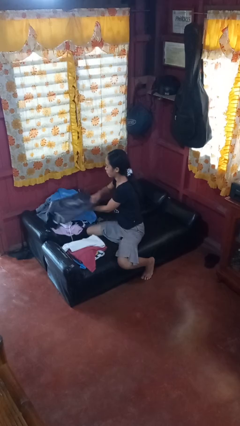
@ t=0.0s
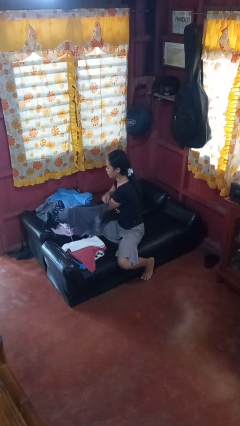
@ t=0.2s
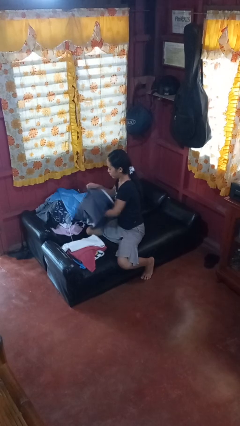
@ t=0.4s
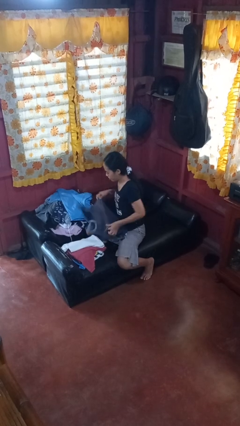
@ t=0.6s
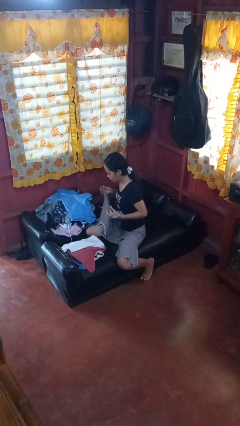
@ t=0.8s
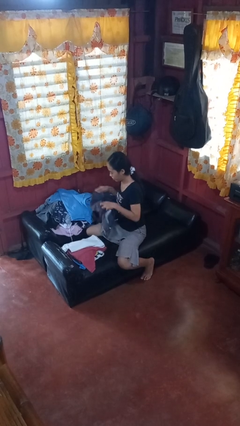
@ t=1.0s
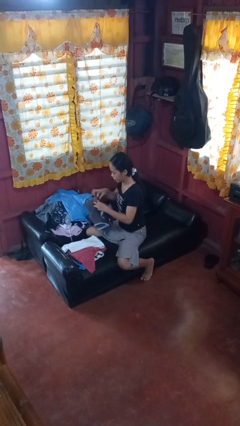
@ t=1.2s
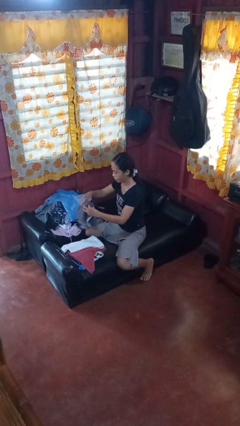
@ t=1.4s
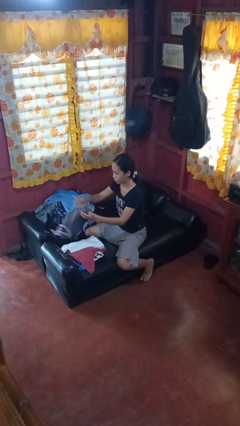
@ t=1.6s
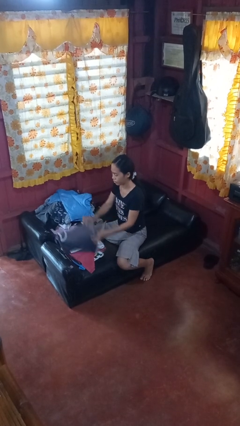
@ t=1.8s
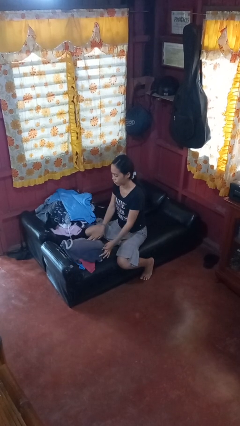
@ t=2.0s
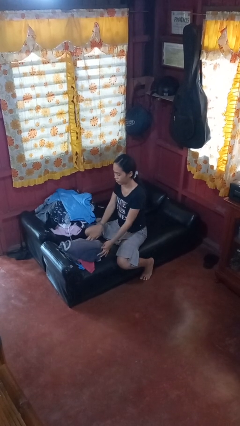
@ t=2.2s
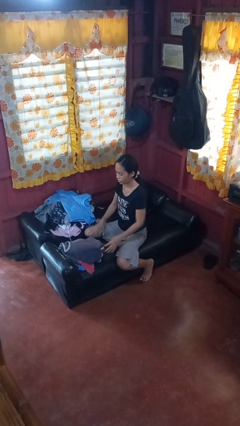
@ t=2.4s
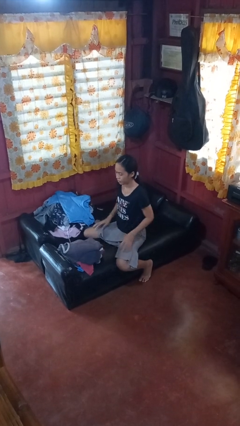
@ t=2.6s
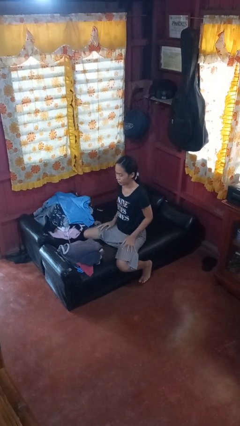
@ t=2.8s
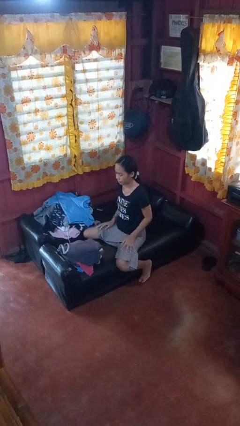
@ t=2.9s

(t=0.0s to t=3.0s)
person folds shirt

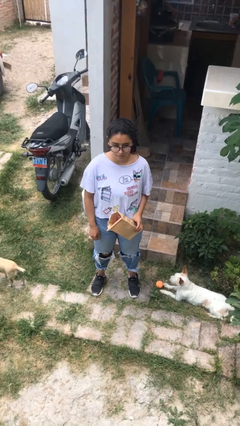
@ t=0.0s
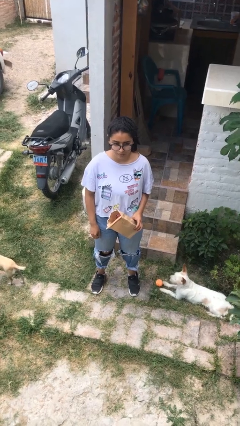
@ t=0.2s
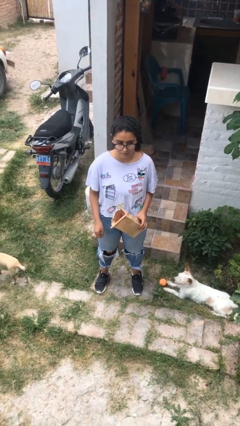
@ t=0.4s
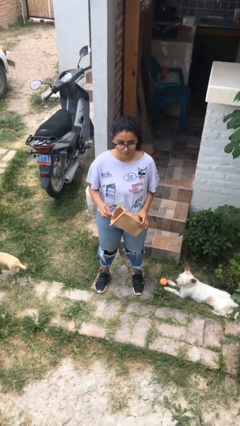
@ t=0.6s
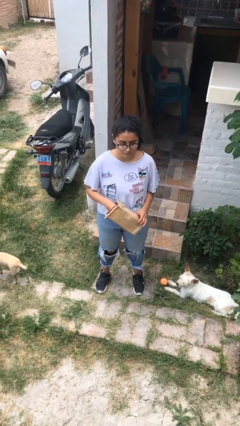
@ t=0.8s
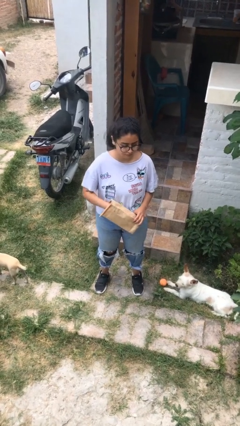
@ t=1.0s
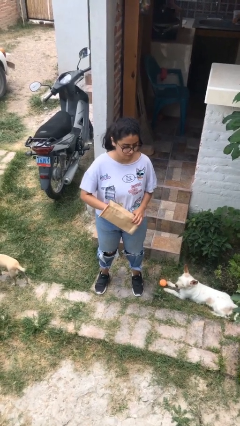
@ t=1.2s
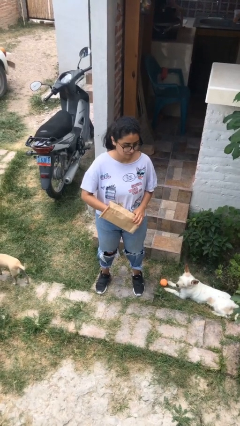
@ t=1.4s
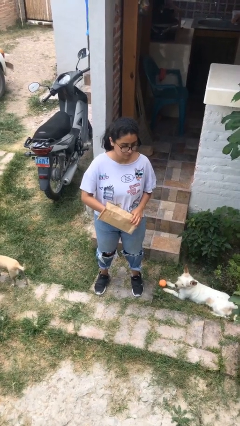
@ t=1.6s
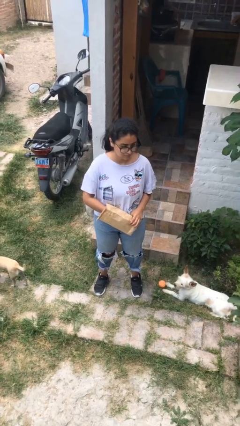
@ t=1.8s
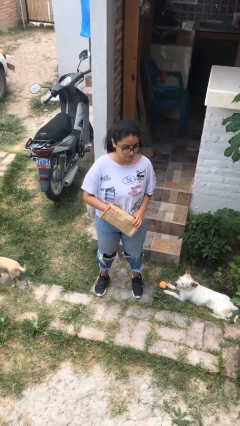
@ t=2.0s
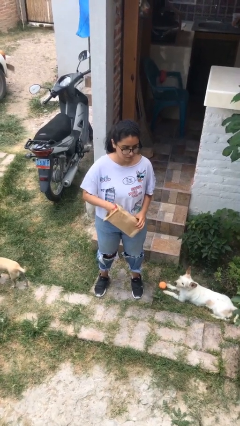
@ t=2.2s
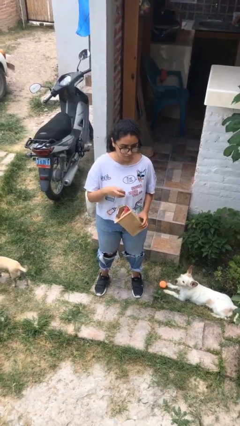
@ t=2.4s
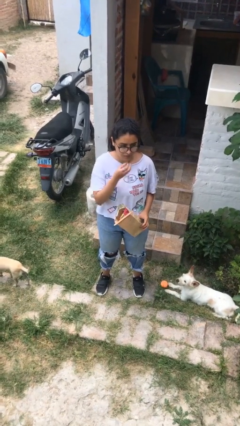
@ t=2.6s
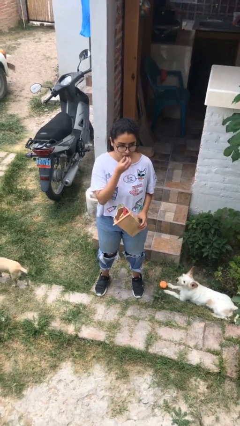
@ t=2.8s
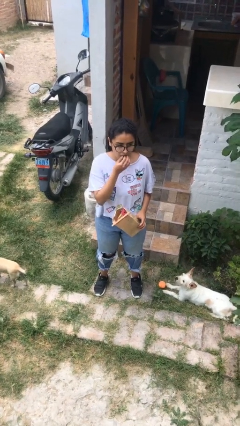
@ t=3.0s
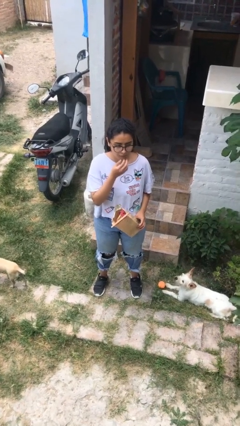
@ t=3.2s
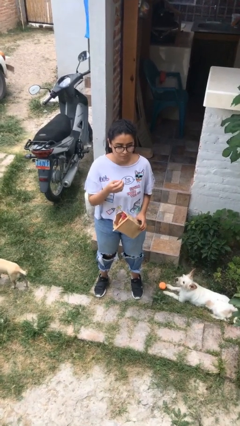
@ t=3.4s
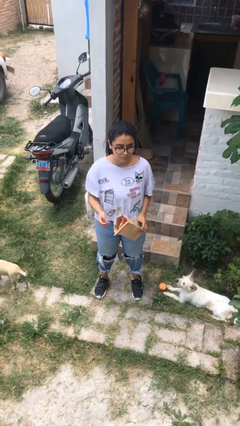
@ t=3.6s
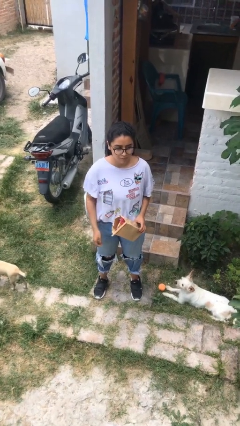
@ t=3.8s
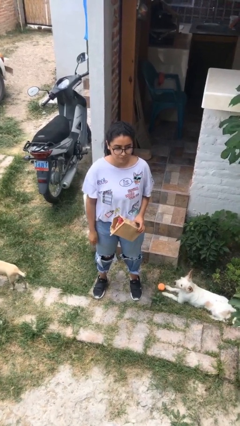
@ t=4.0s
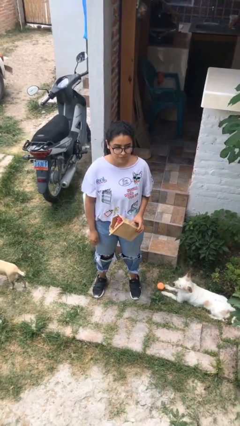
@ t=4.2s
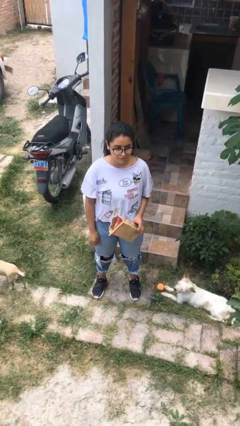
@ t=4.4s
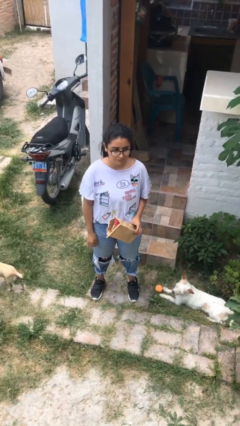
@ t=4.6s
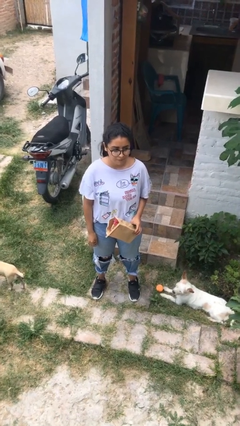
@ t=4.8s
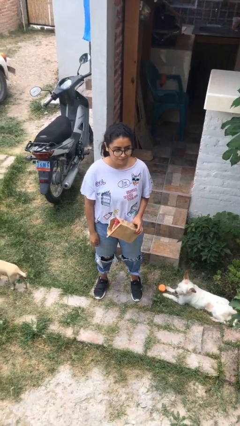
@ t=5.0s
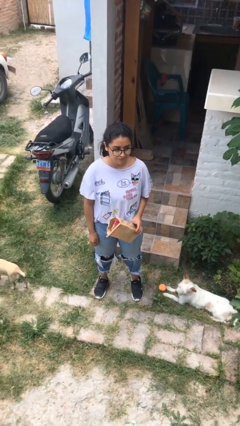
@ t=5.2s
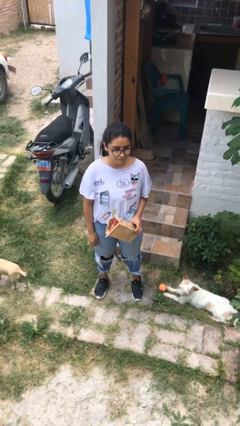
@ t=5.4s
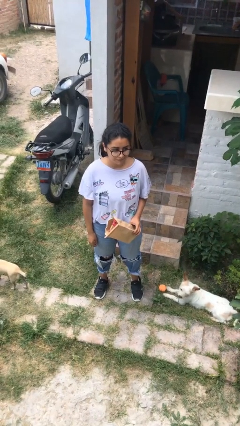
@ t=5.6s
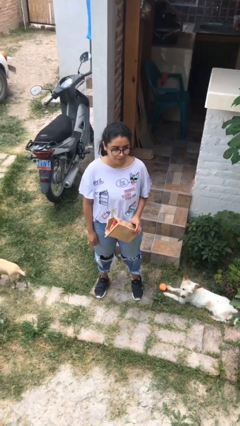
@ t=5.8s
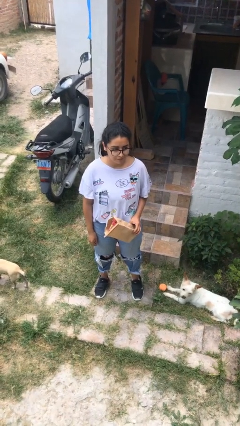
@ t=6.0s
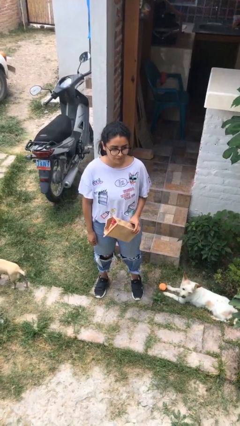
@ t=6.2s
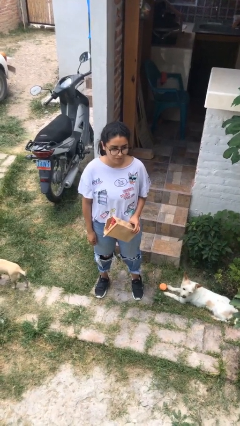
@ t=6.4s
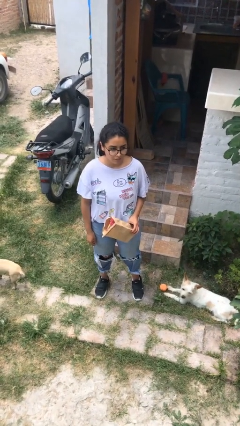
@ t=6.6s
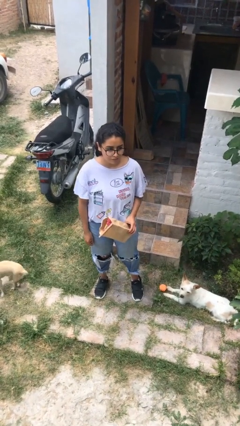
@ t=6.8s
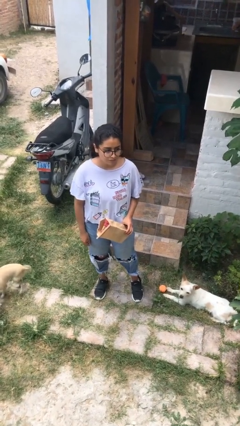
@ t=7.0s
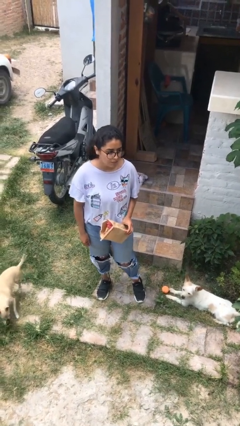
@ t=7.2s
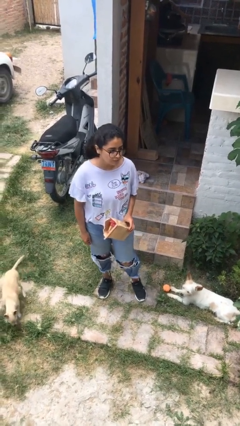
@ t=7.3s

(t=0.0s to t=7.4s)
person eats snack from bag

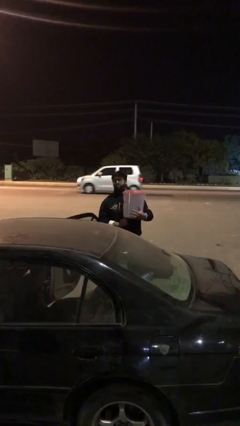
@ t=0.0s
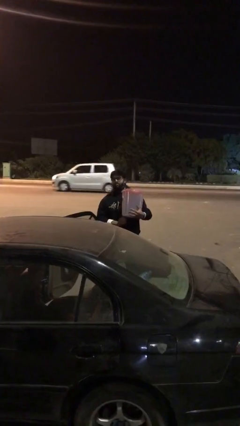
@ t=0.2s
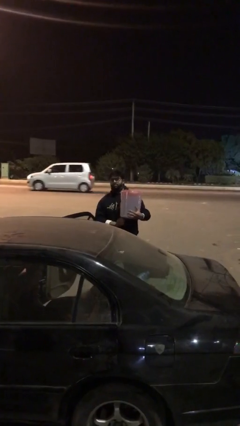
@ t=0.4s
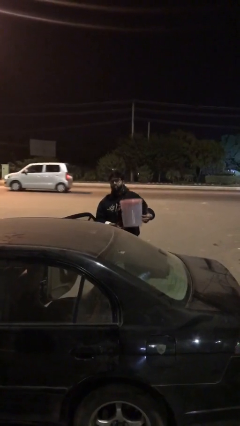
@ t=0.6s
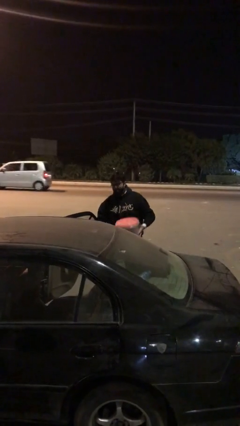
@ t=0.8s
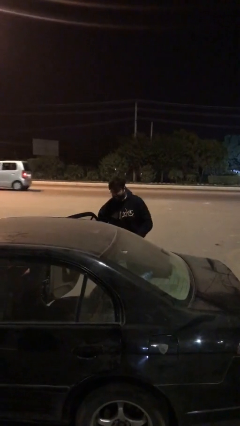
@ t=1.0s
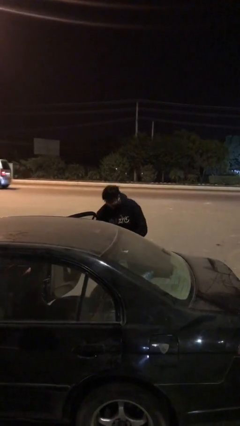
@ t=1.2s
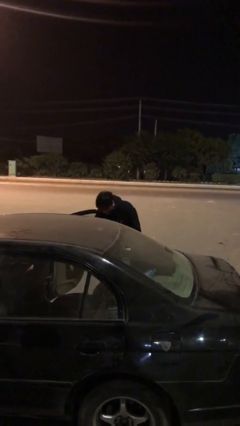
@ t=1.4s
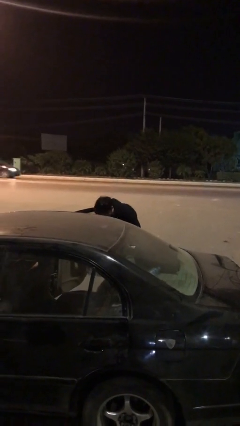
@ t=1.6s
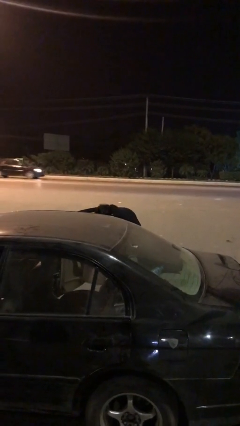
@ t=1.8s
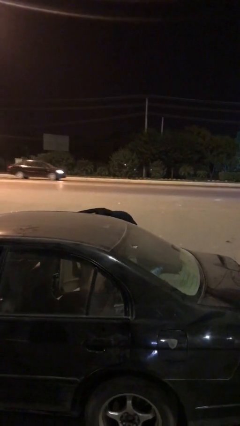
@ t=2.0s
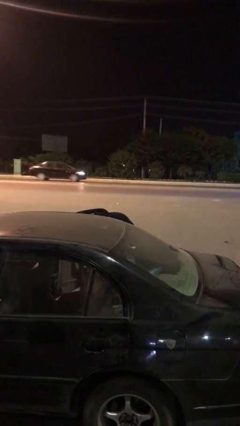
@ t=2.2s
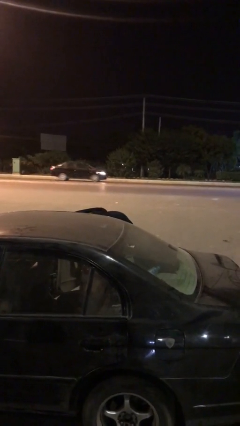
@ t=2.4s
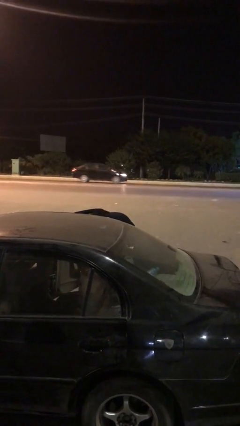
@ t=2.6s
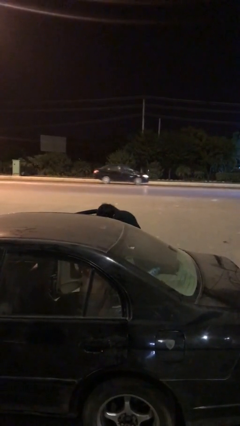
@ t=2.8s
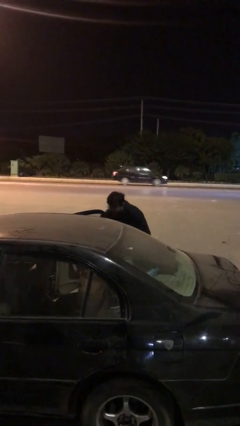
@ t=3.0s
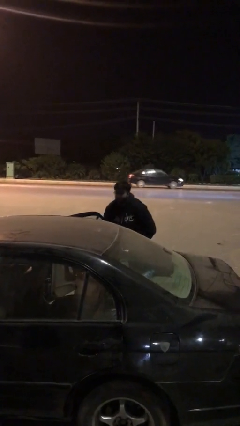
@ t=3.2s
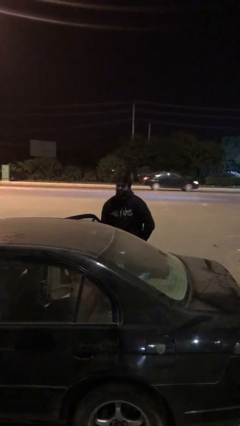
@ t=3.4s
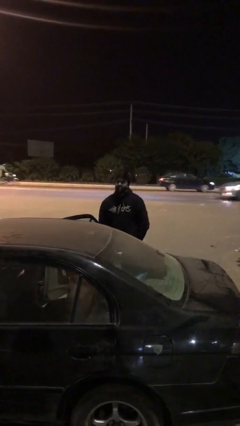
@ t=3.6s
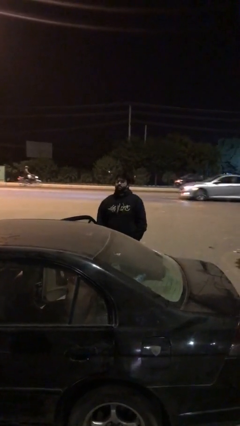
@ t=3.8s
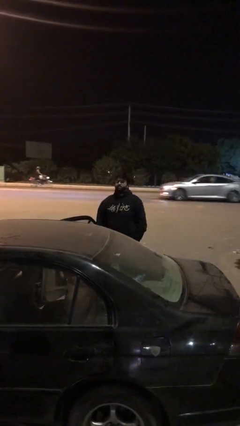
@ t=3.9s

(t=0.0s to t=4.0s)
person loads car

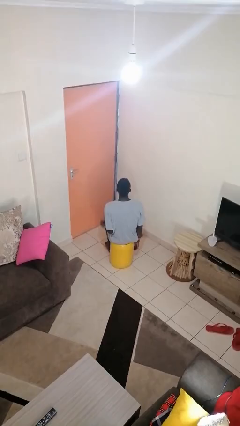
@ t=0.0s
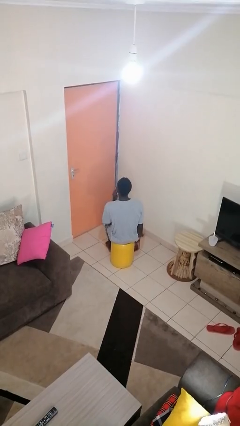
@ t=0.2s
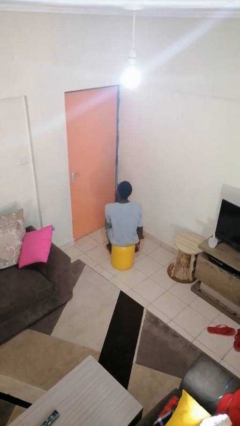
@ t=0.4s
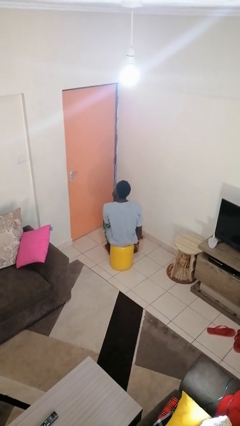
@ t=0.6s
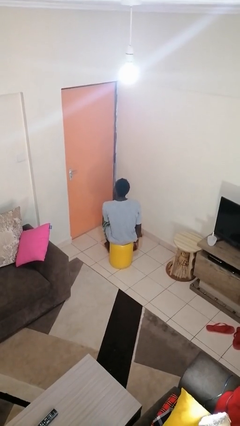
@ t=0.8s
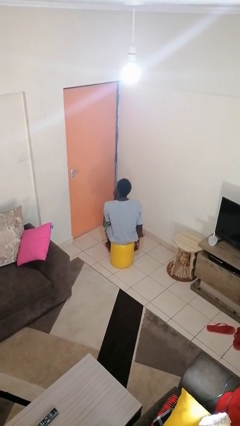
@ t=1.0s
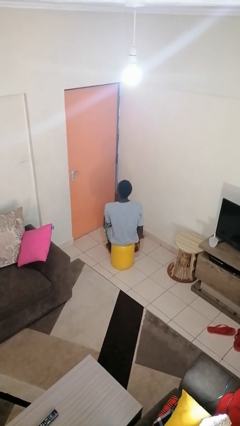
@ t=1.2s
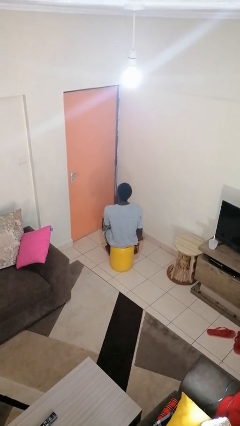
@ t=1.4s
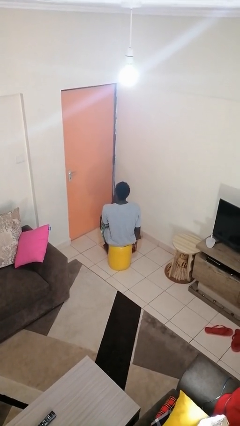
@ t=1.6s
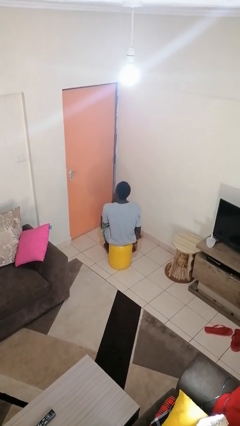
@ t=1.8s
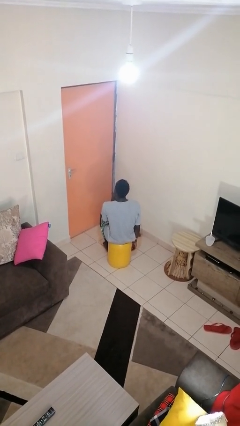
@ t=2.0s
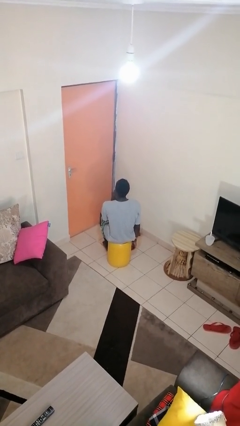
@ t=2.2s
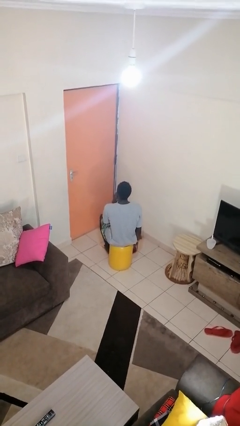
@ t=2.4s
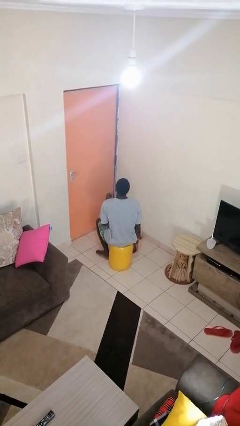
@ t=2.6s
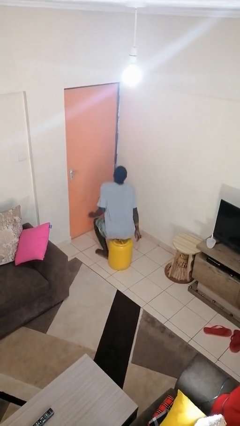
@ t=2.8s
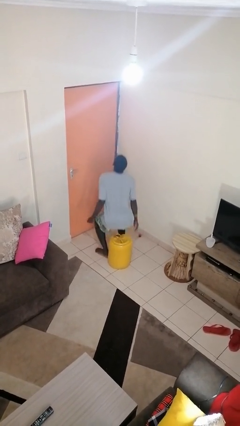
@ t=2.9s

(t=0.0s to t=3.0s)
person strokes chin

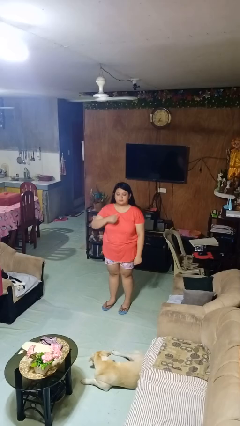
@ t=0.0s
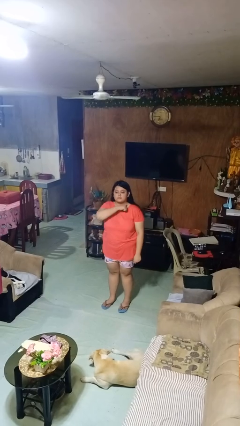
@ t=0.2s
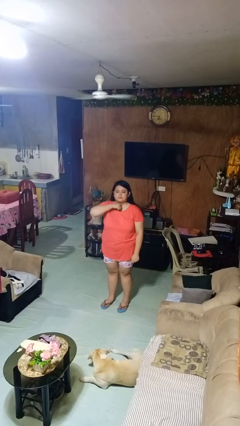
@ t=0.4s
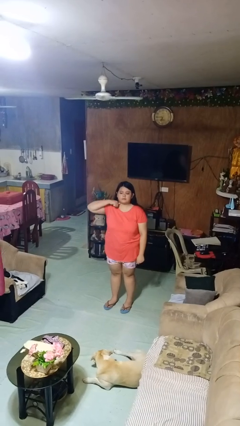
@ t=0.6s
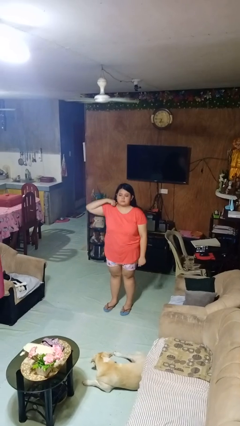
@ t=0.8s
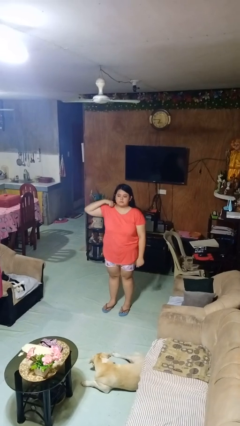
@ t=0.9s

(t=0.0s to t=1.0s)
person gestures cut
